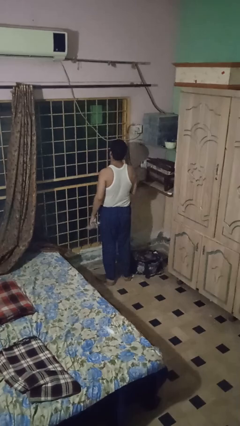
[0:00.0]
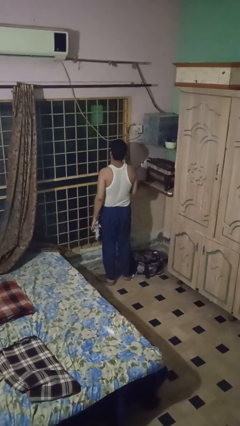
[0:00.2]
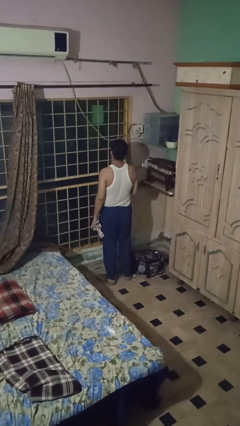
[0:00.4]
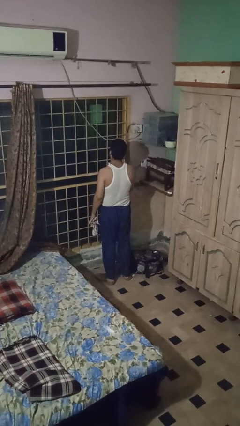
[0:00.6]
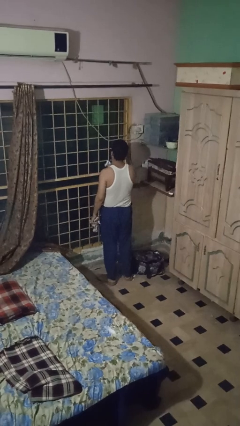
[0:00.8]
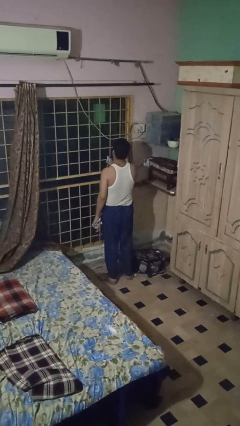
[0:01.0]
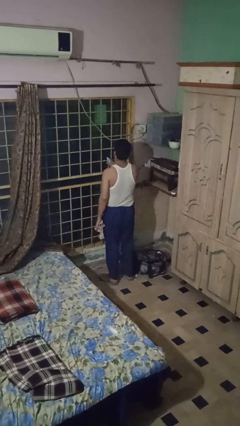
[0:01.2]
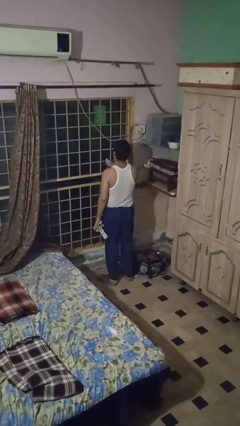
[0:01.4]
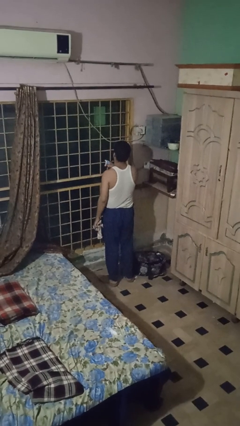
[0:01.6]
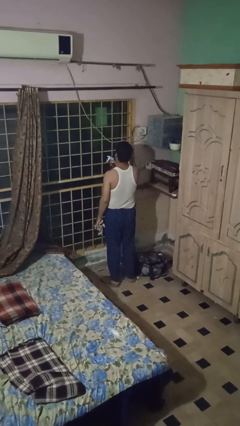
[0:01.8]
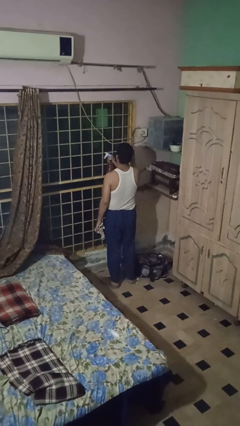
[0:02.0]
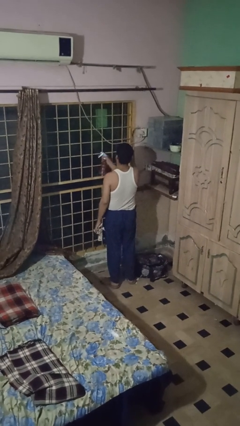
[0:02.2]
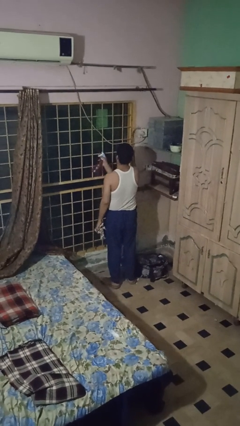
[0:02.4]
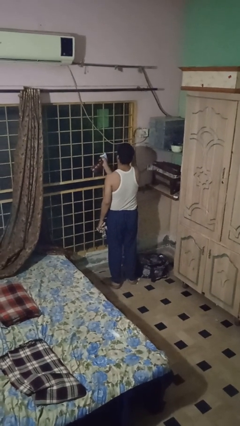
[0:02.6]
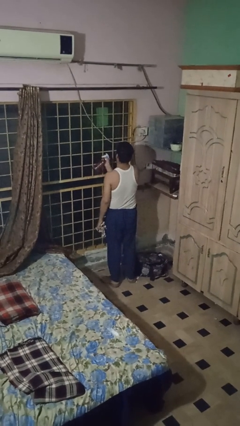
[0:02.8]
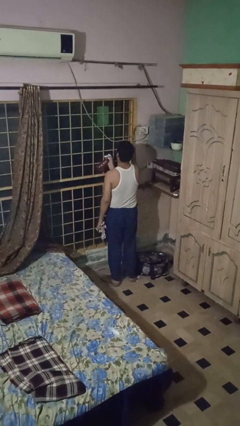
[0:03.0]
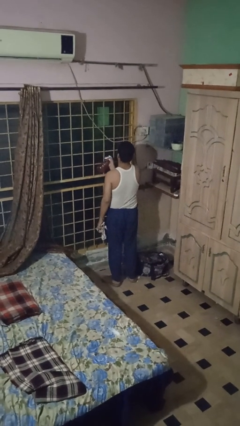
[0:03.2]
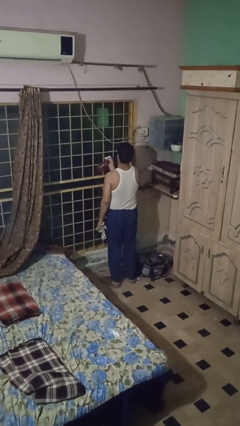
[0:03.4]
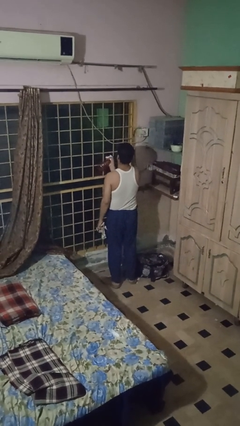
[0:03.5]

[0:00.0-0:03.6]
person sprays from bottle

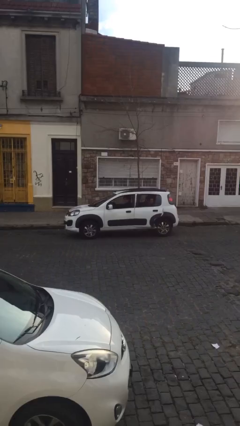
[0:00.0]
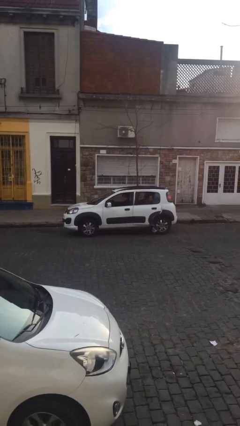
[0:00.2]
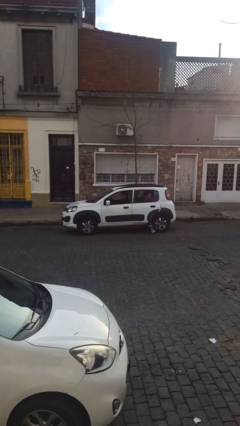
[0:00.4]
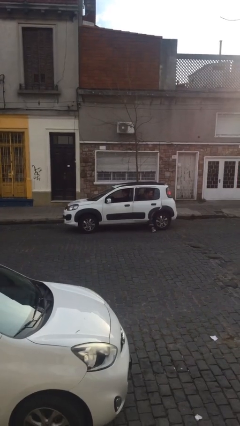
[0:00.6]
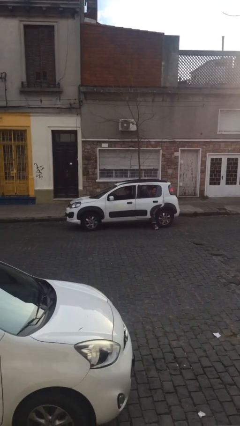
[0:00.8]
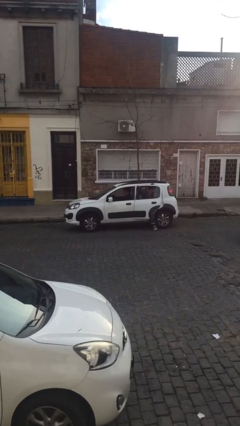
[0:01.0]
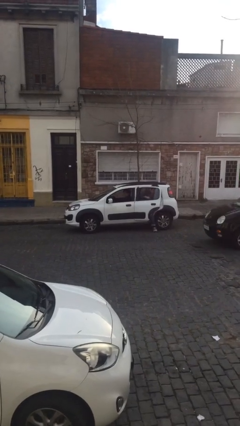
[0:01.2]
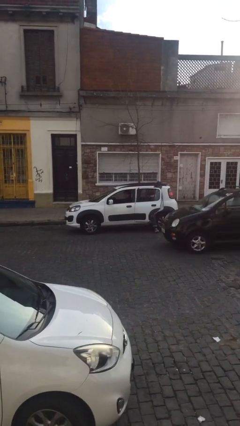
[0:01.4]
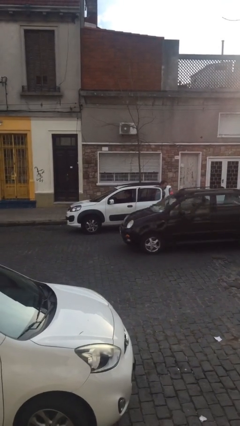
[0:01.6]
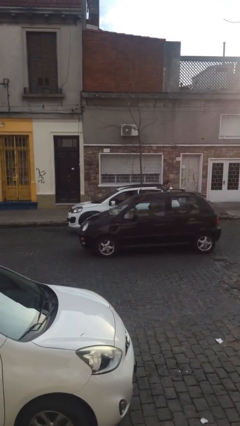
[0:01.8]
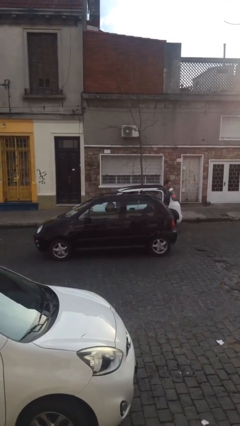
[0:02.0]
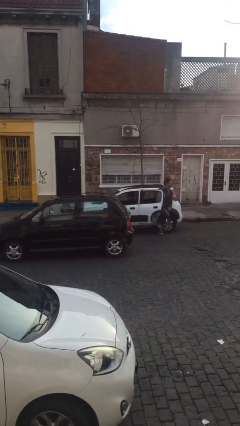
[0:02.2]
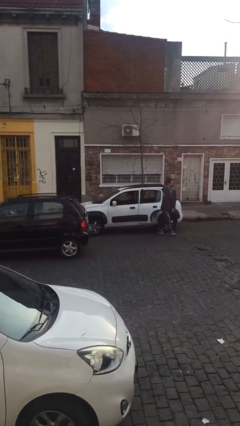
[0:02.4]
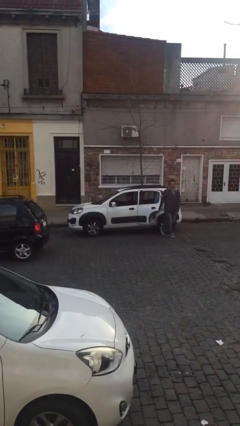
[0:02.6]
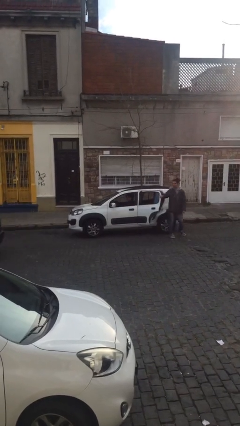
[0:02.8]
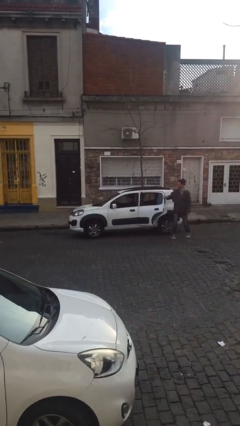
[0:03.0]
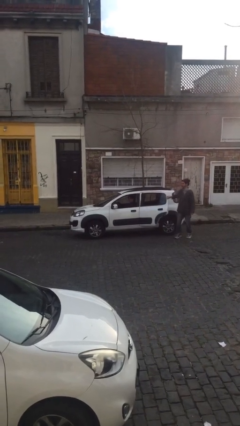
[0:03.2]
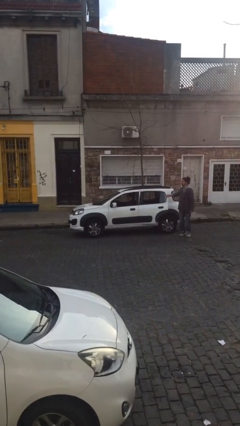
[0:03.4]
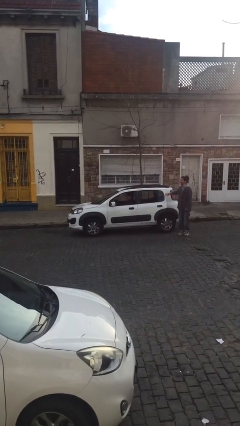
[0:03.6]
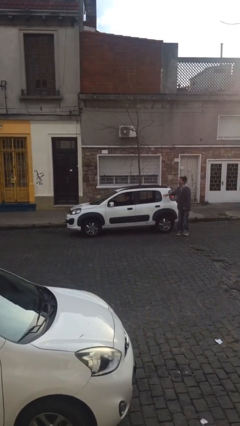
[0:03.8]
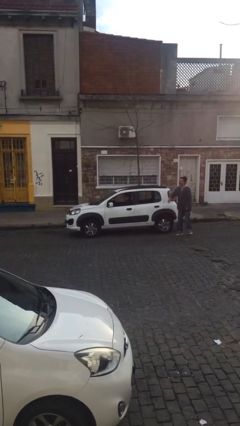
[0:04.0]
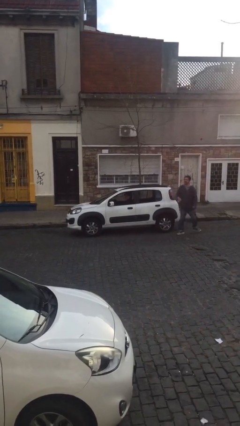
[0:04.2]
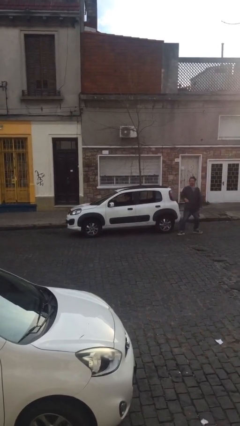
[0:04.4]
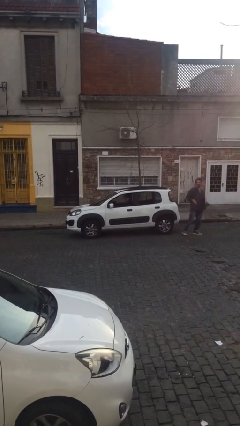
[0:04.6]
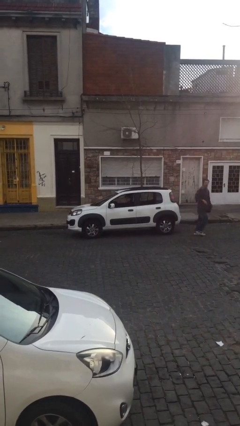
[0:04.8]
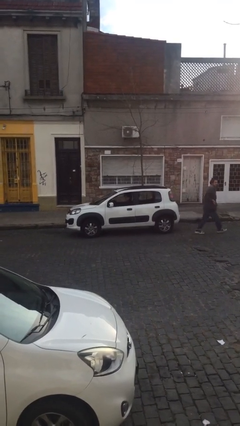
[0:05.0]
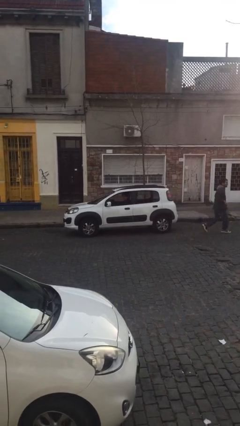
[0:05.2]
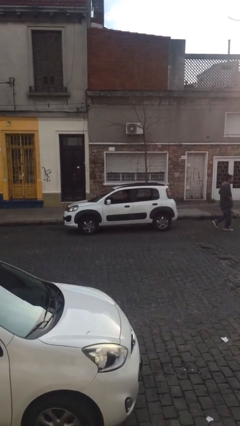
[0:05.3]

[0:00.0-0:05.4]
car drops off person

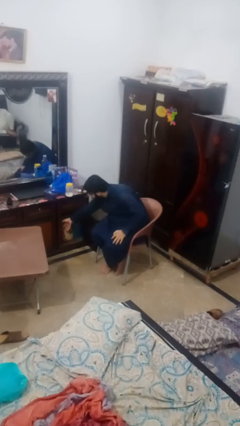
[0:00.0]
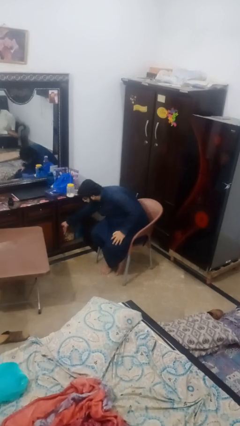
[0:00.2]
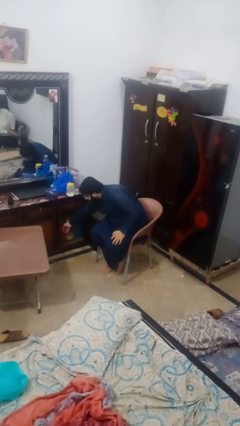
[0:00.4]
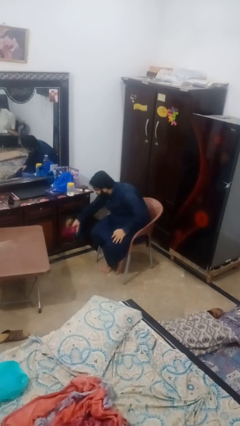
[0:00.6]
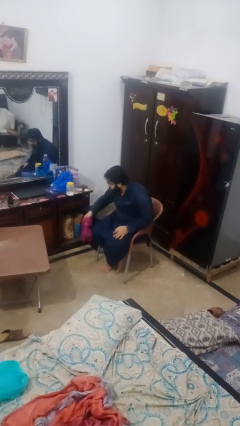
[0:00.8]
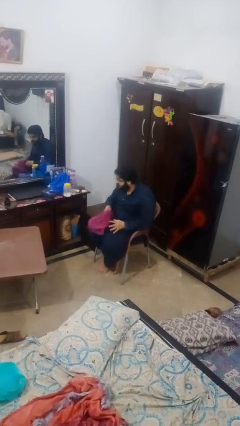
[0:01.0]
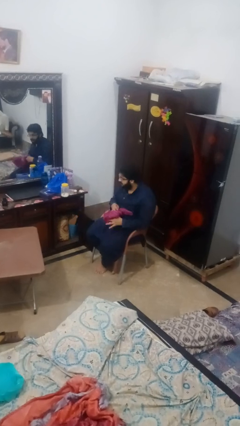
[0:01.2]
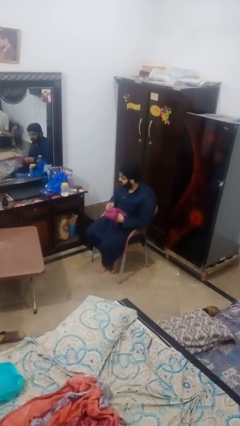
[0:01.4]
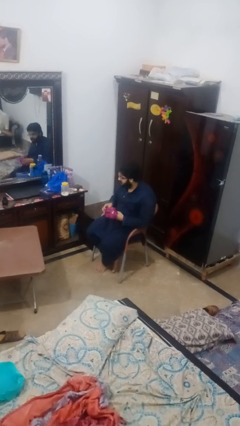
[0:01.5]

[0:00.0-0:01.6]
person takes clothes from dresser

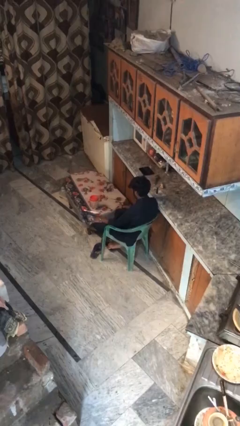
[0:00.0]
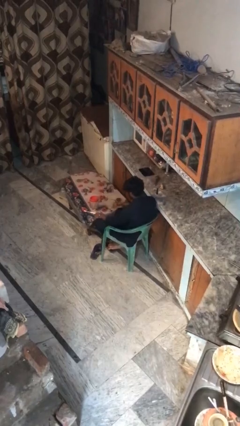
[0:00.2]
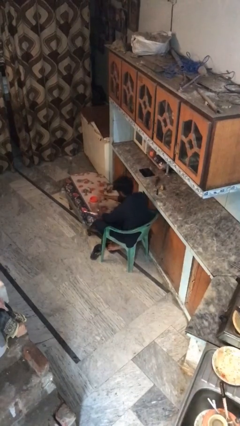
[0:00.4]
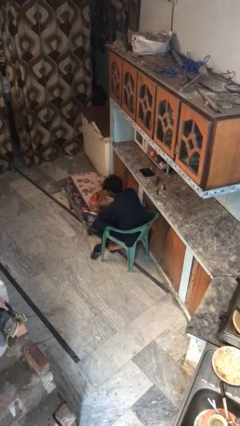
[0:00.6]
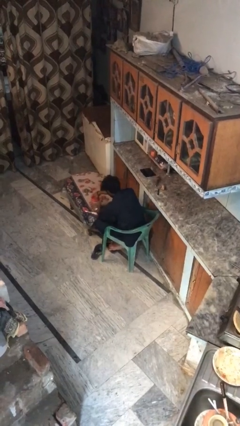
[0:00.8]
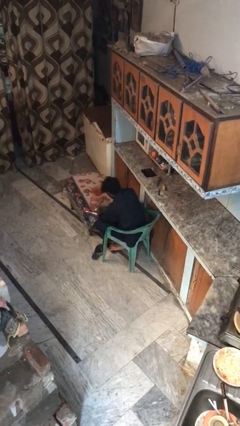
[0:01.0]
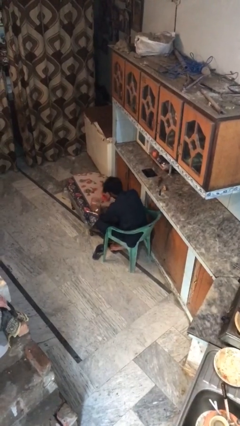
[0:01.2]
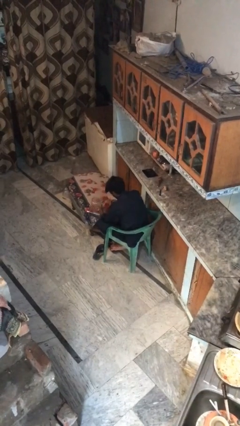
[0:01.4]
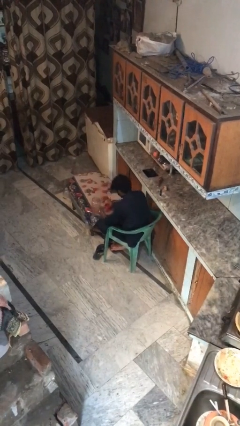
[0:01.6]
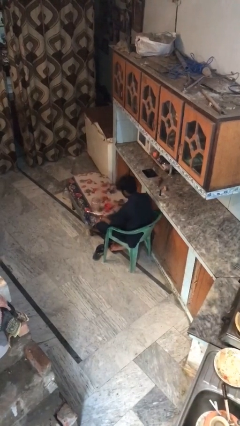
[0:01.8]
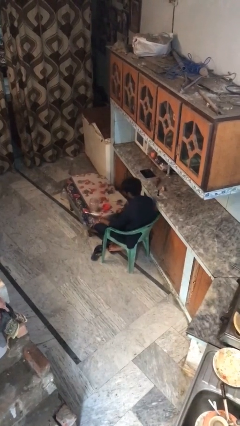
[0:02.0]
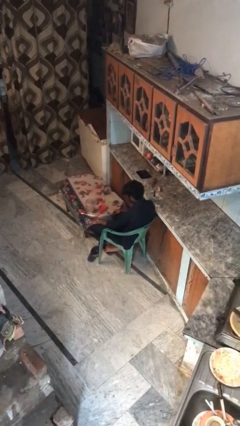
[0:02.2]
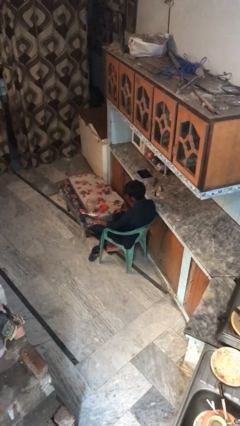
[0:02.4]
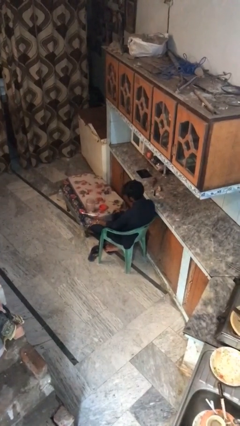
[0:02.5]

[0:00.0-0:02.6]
person opens jar

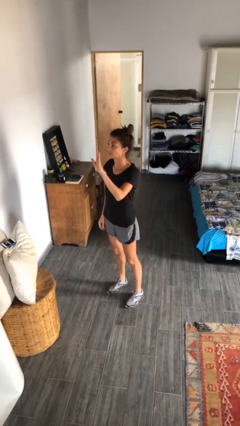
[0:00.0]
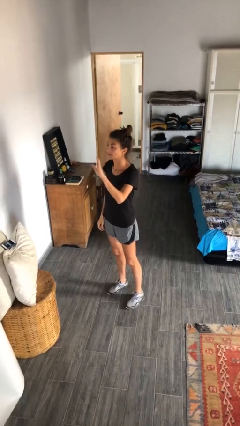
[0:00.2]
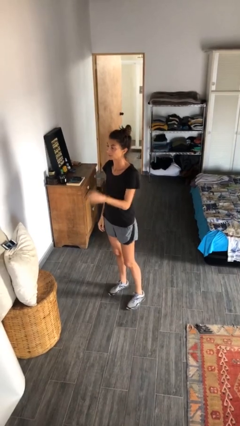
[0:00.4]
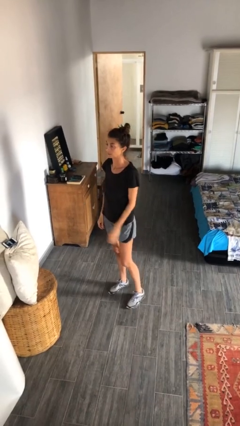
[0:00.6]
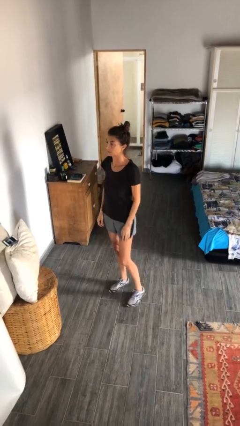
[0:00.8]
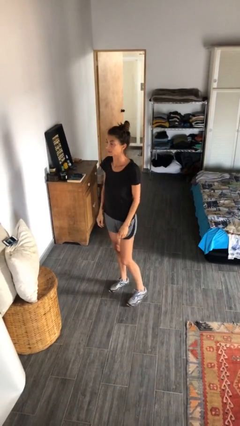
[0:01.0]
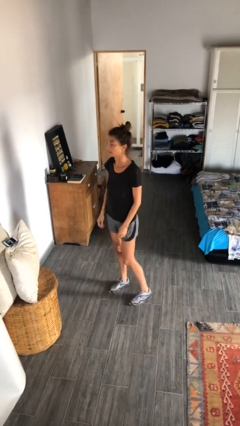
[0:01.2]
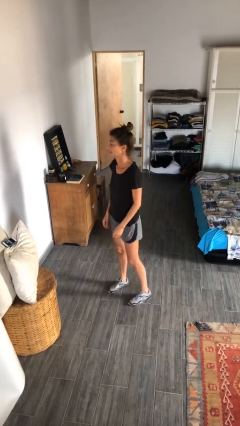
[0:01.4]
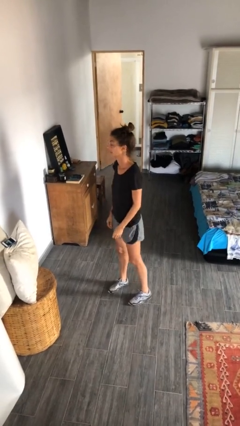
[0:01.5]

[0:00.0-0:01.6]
person gestures lower hand

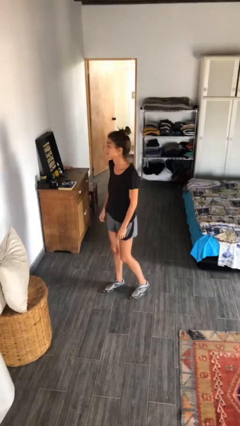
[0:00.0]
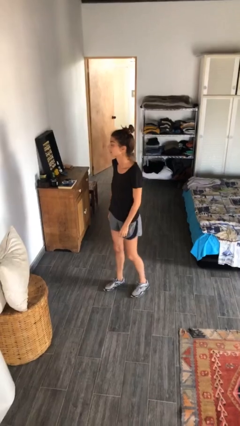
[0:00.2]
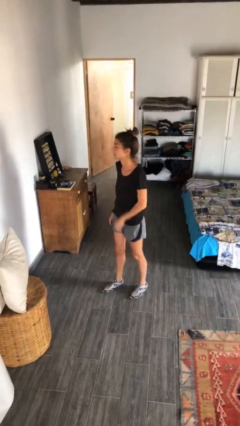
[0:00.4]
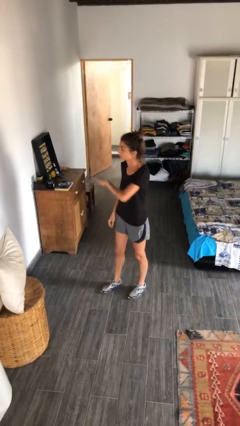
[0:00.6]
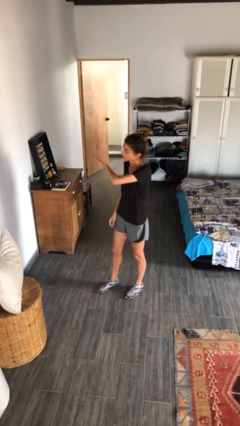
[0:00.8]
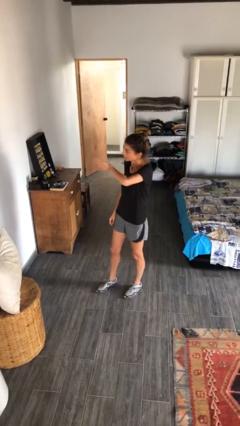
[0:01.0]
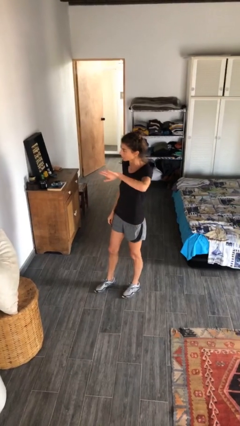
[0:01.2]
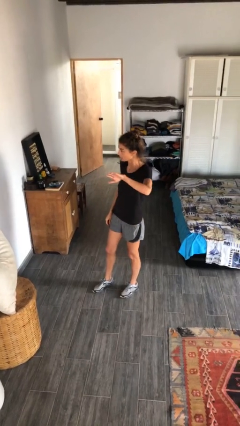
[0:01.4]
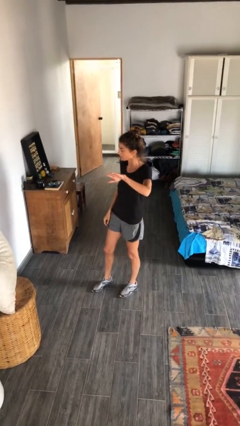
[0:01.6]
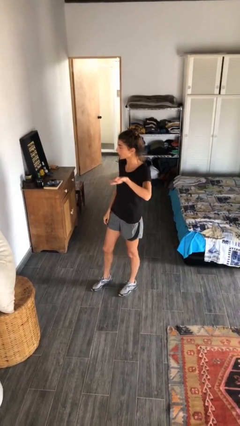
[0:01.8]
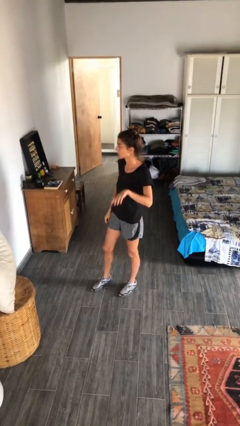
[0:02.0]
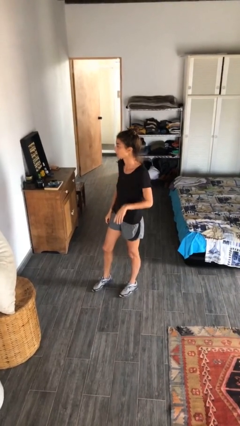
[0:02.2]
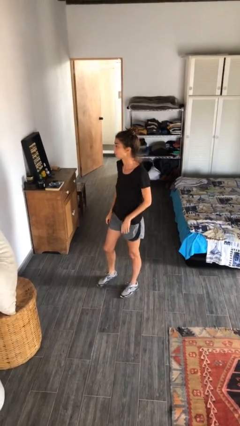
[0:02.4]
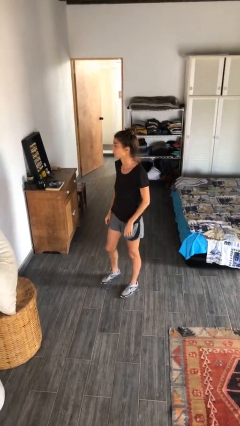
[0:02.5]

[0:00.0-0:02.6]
person gestures swipe left
